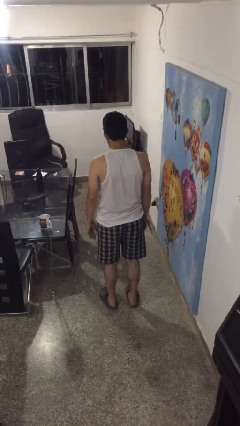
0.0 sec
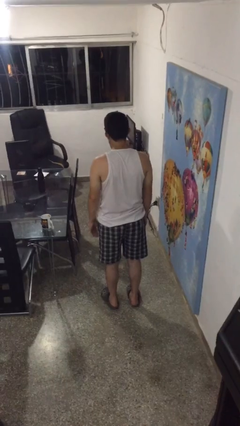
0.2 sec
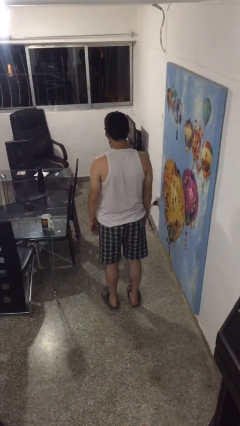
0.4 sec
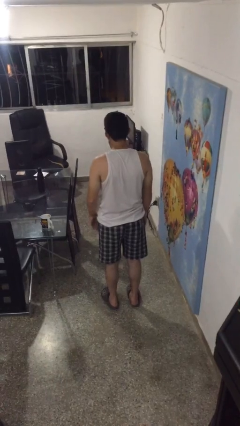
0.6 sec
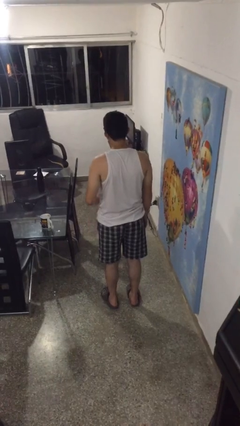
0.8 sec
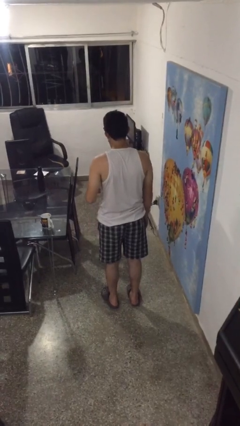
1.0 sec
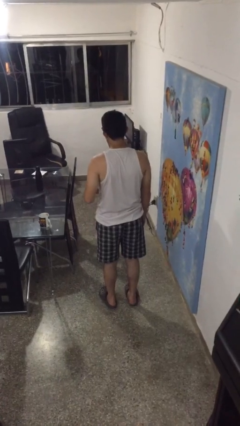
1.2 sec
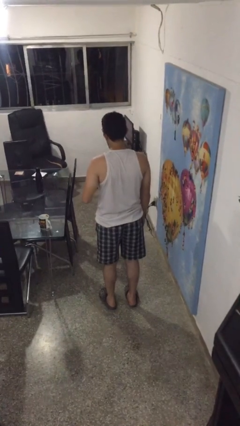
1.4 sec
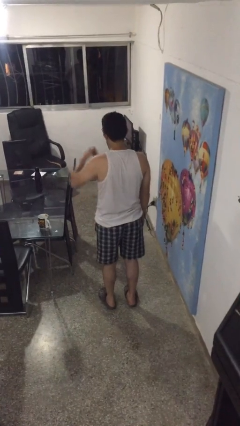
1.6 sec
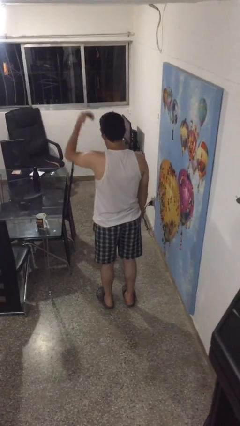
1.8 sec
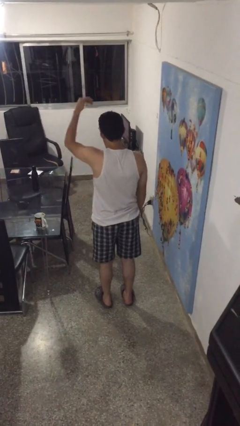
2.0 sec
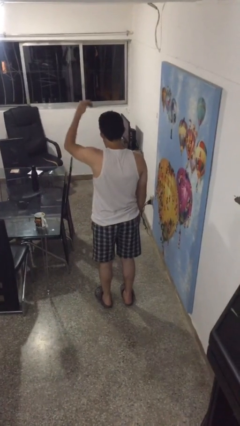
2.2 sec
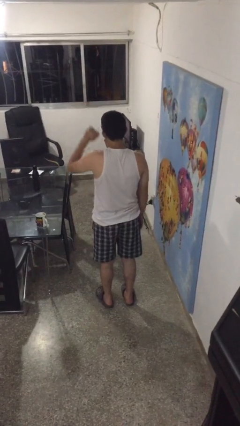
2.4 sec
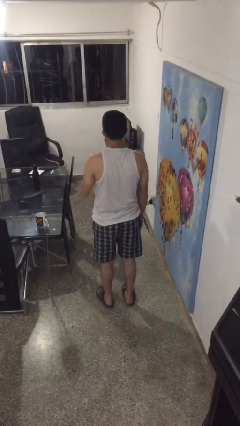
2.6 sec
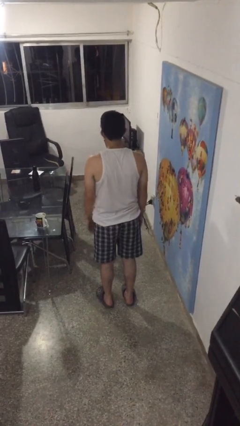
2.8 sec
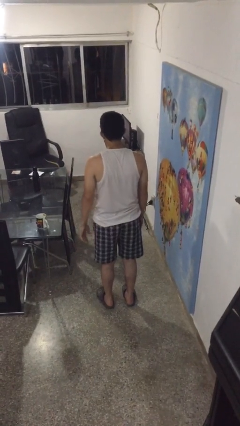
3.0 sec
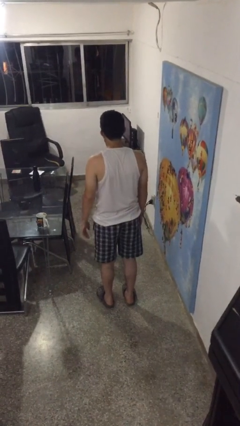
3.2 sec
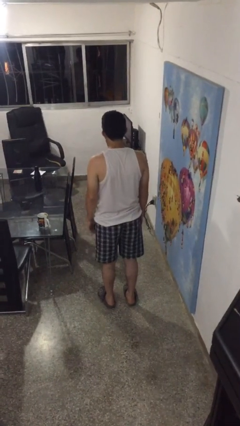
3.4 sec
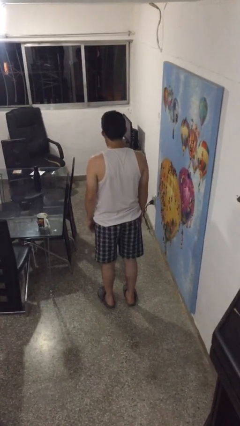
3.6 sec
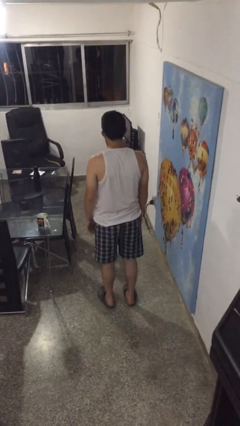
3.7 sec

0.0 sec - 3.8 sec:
person gestures swipe up

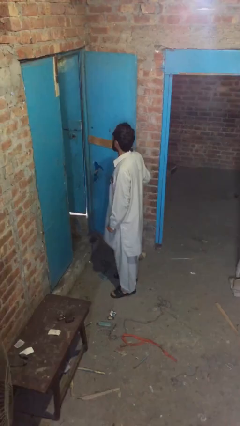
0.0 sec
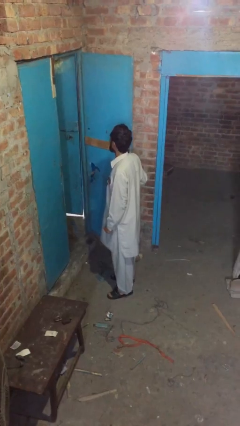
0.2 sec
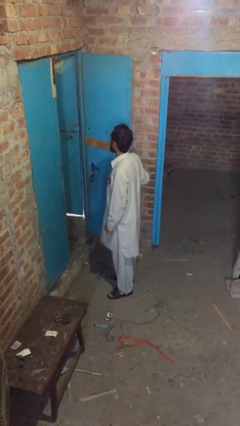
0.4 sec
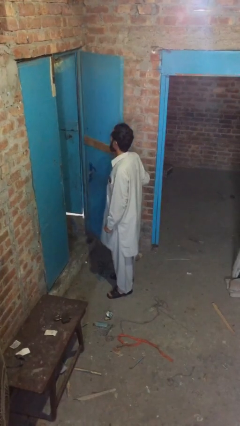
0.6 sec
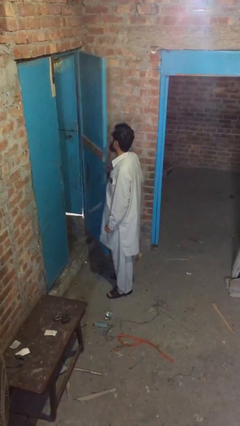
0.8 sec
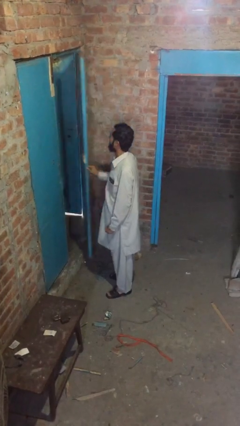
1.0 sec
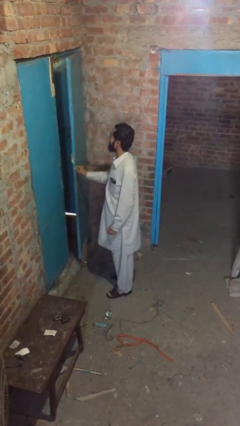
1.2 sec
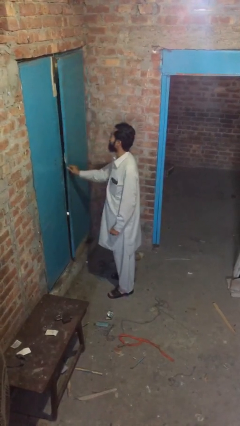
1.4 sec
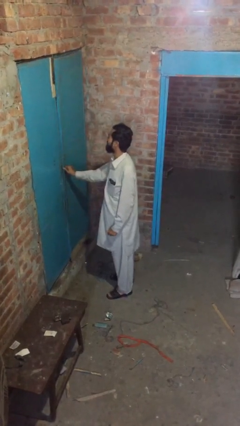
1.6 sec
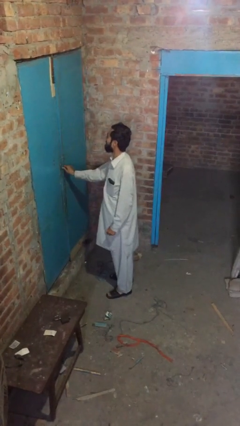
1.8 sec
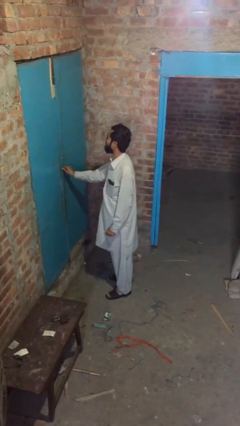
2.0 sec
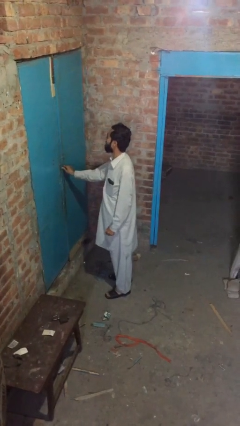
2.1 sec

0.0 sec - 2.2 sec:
person closes facility door

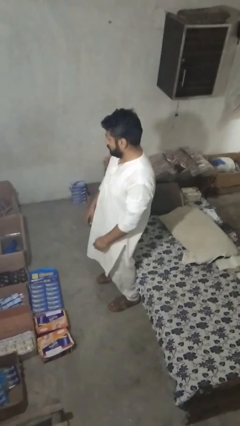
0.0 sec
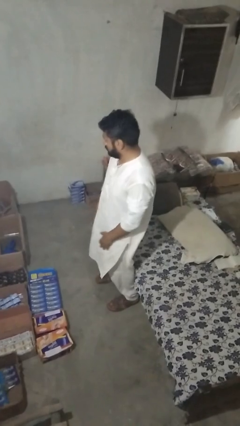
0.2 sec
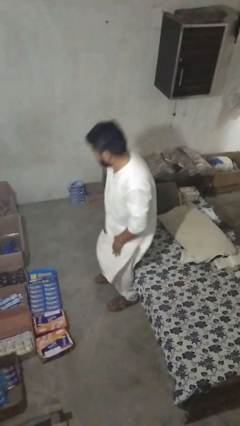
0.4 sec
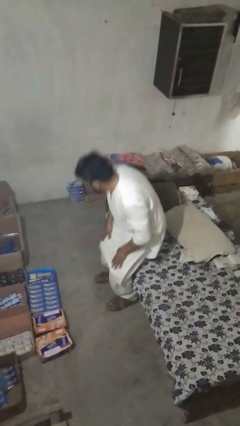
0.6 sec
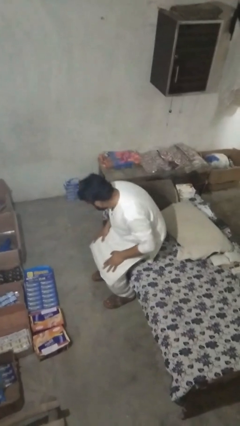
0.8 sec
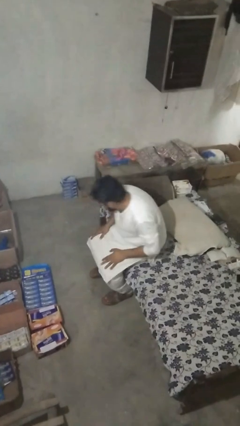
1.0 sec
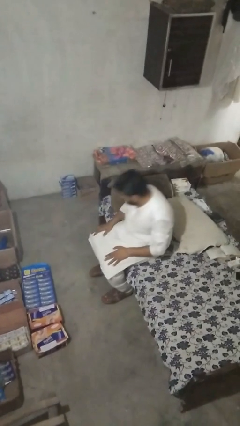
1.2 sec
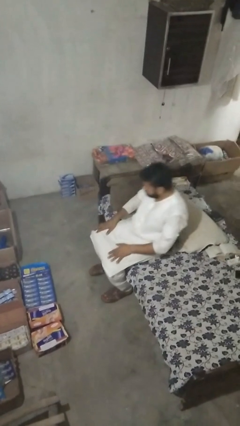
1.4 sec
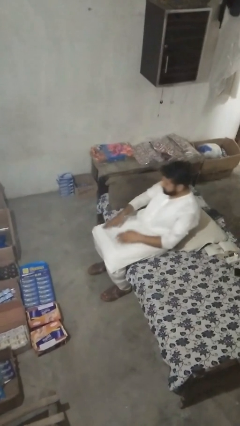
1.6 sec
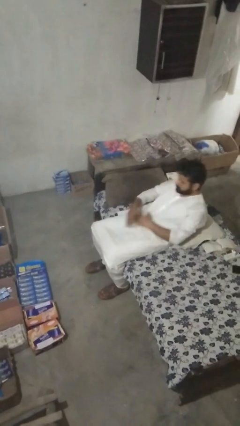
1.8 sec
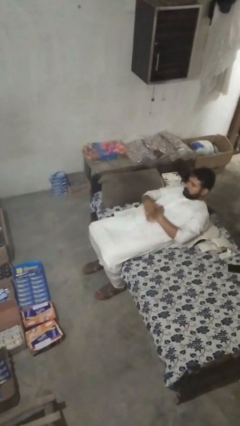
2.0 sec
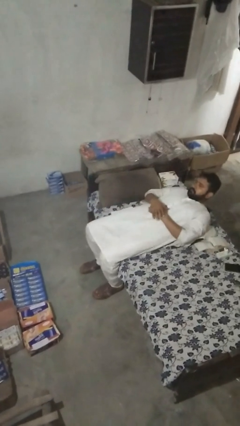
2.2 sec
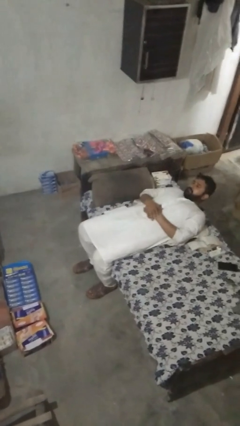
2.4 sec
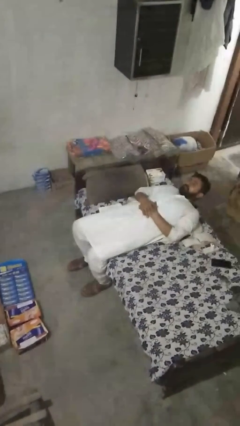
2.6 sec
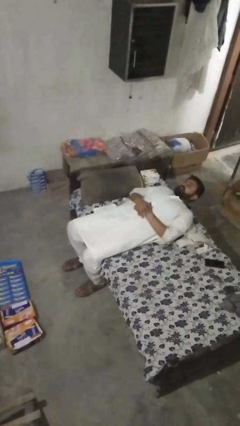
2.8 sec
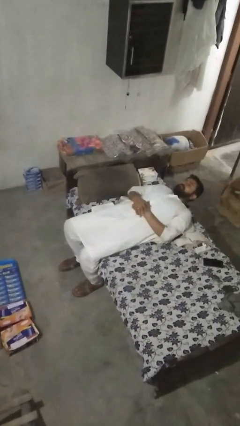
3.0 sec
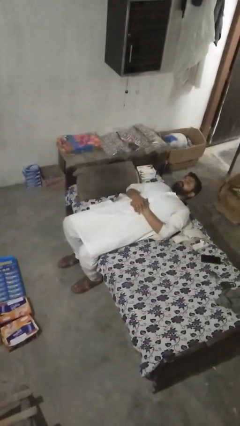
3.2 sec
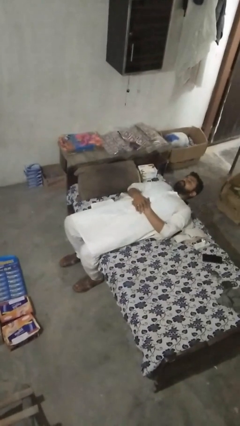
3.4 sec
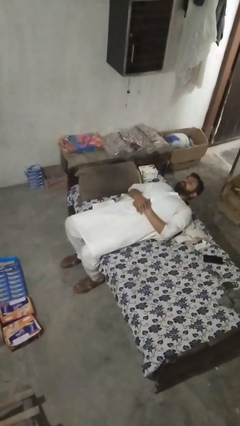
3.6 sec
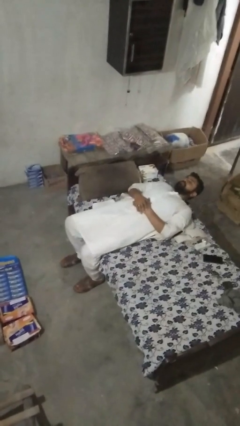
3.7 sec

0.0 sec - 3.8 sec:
person lies down on couch

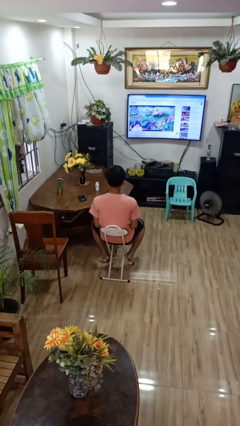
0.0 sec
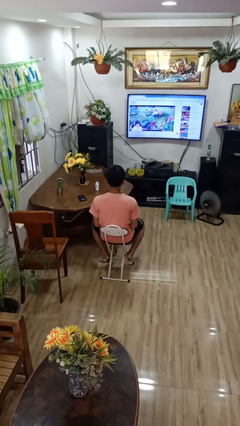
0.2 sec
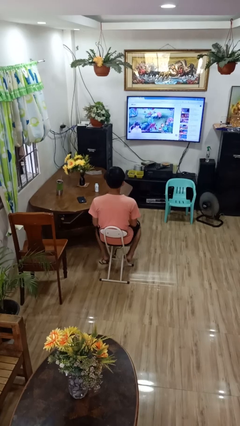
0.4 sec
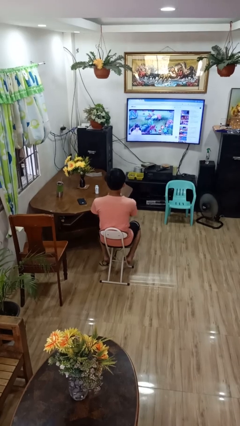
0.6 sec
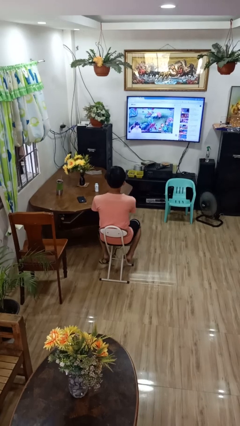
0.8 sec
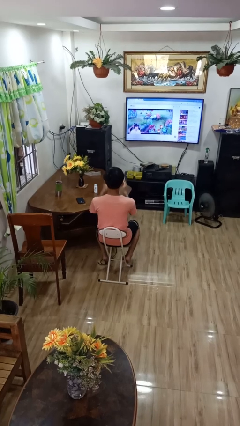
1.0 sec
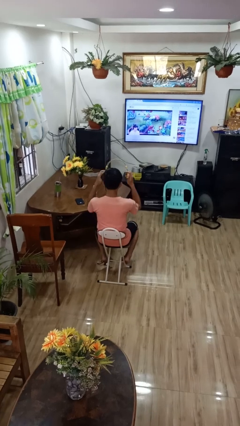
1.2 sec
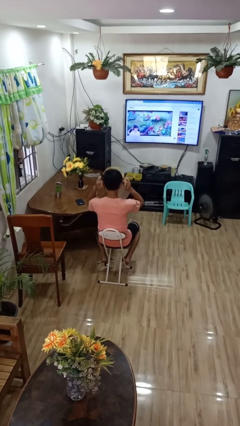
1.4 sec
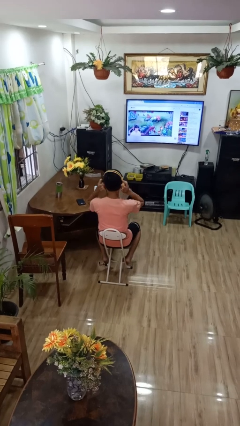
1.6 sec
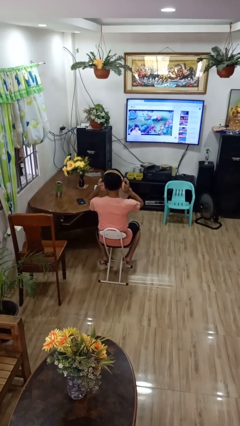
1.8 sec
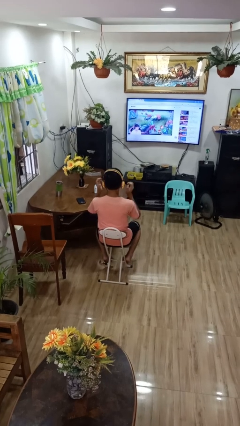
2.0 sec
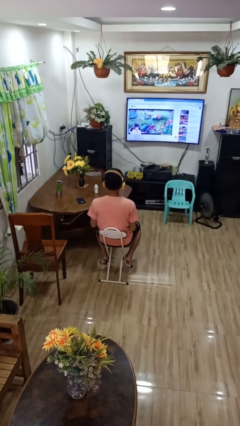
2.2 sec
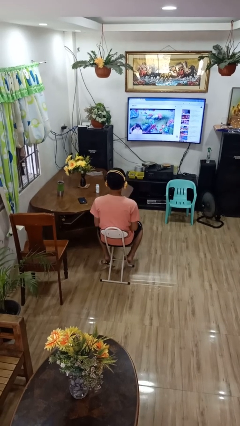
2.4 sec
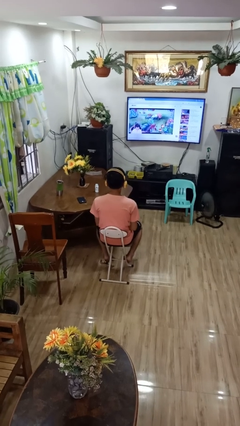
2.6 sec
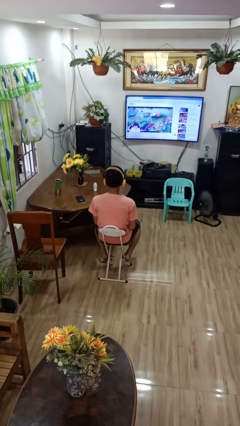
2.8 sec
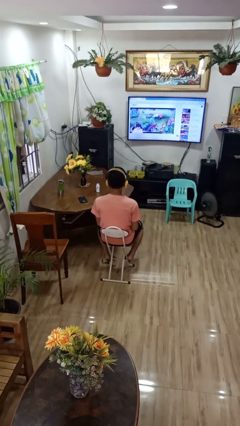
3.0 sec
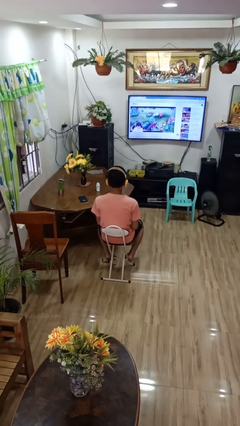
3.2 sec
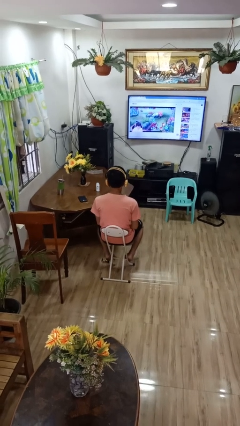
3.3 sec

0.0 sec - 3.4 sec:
person puts on headphones

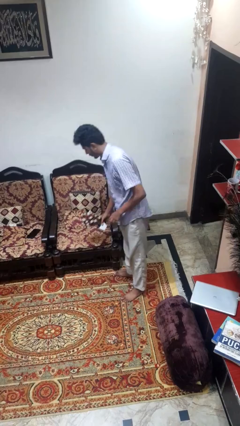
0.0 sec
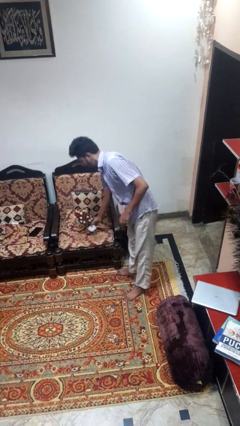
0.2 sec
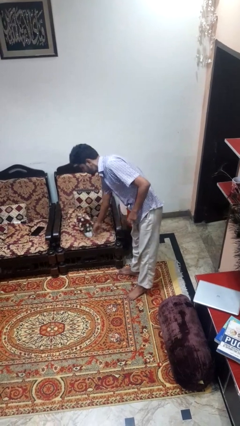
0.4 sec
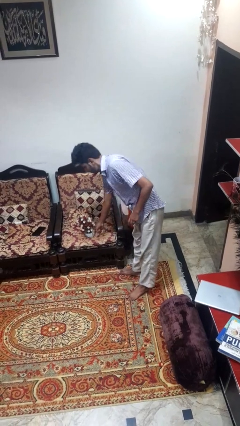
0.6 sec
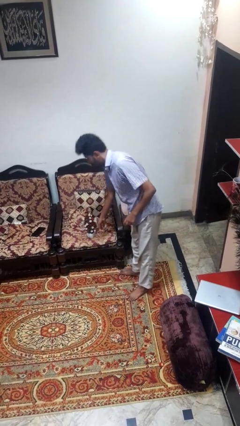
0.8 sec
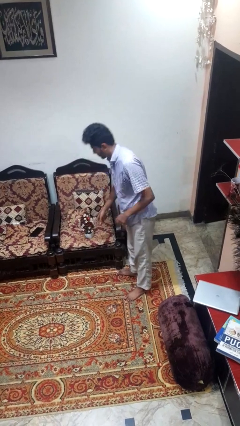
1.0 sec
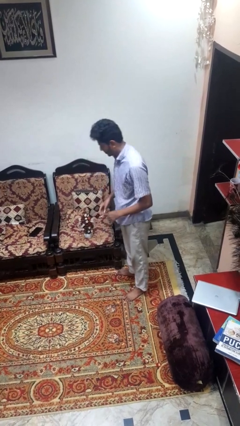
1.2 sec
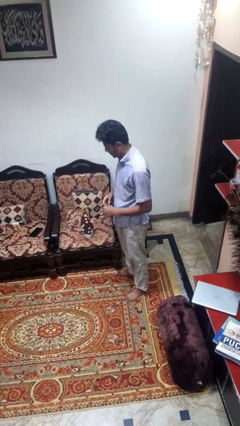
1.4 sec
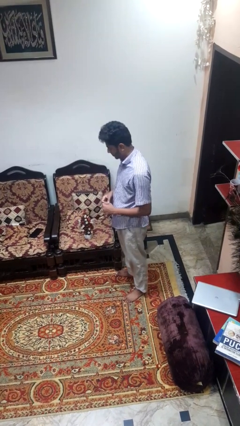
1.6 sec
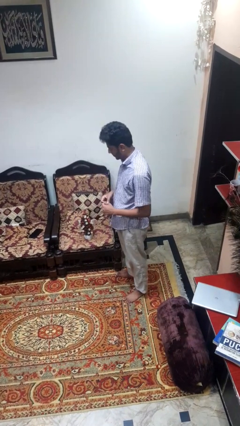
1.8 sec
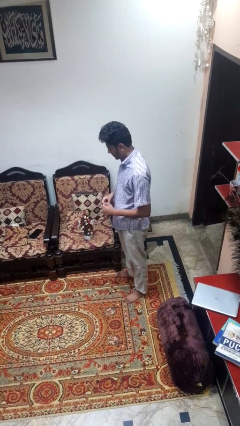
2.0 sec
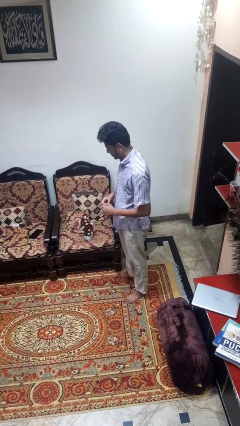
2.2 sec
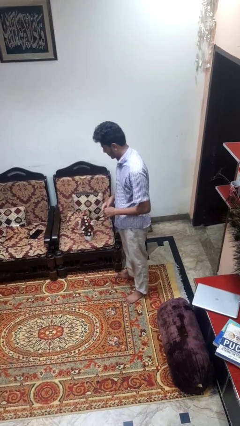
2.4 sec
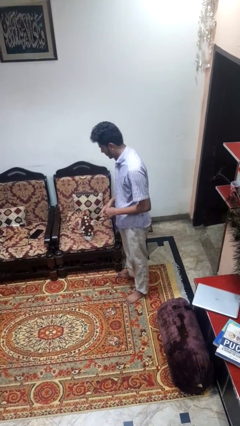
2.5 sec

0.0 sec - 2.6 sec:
person puts down object on couch

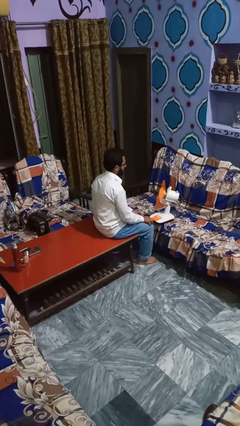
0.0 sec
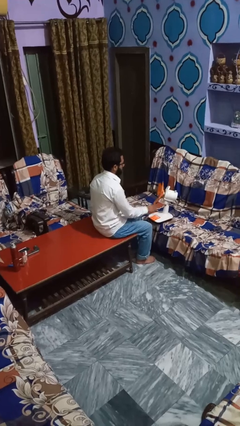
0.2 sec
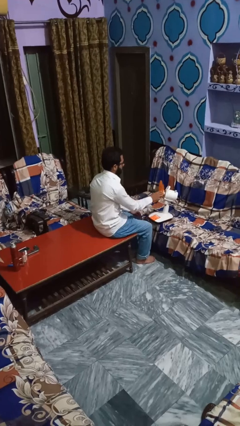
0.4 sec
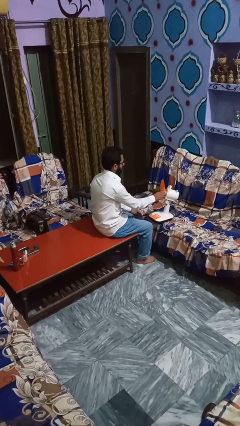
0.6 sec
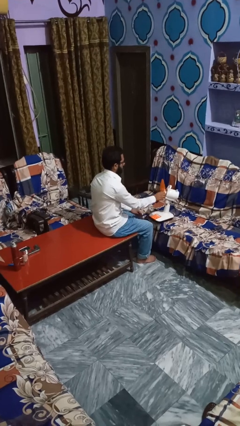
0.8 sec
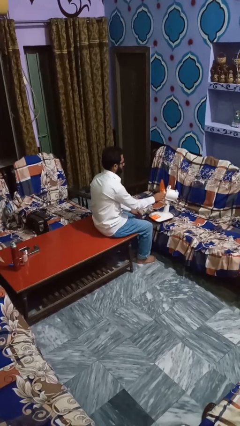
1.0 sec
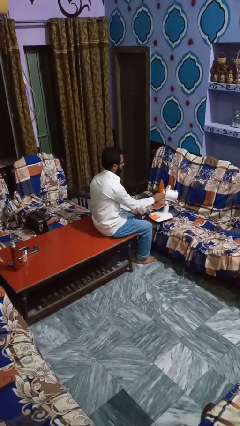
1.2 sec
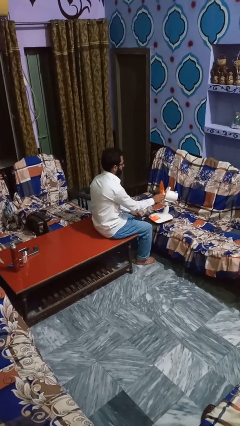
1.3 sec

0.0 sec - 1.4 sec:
person turns off fan

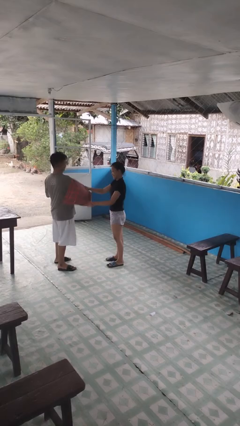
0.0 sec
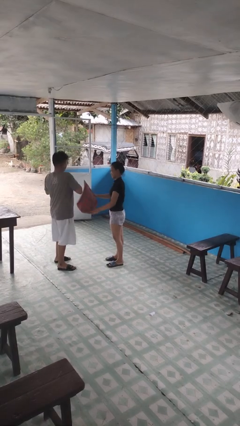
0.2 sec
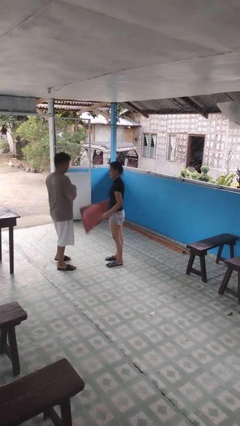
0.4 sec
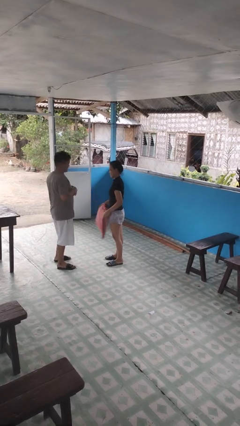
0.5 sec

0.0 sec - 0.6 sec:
person hits person with pillow
